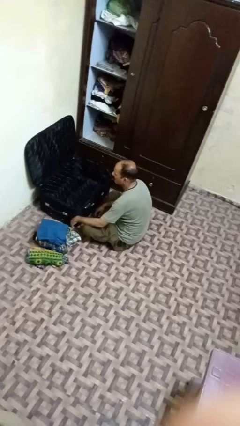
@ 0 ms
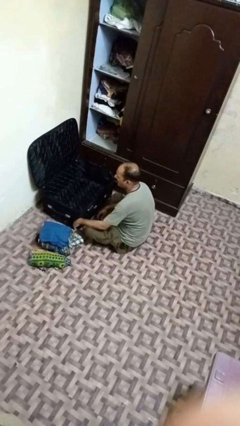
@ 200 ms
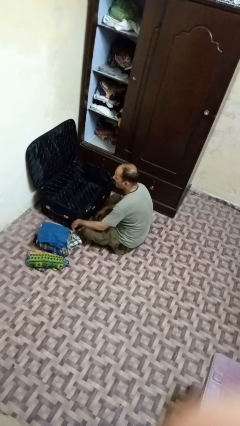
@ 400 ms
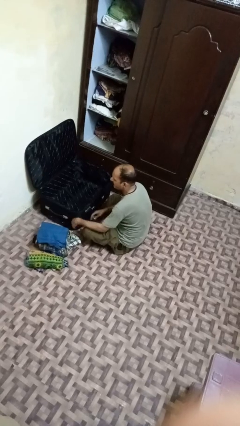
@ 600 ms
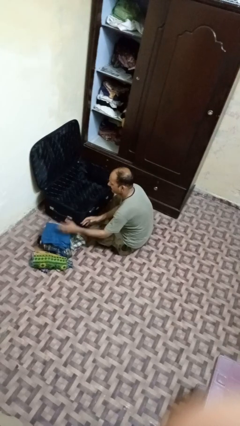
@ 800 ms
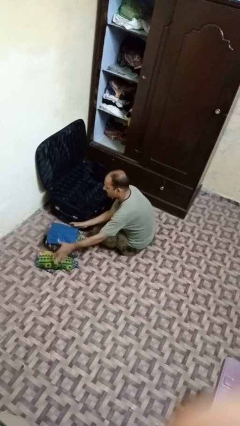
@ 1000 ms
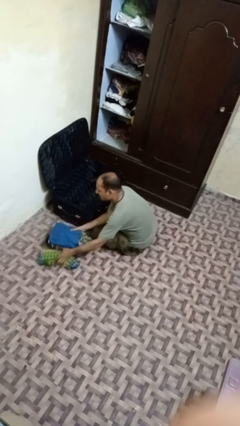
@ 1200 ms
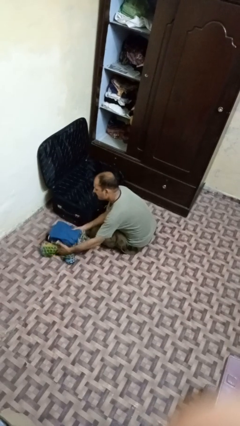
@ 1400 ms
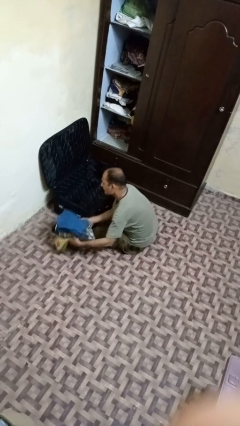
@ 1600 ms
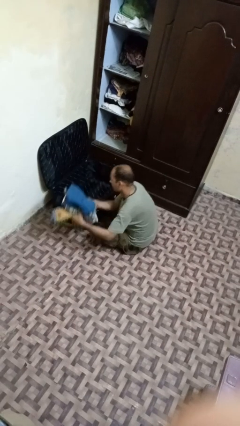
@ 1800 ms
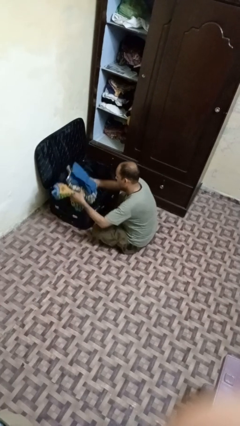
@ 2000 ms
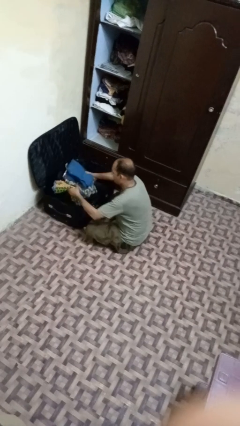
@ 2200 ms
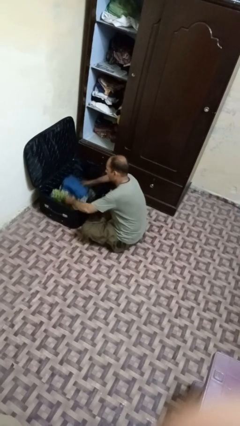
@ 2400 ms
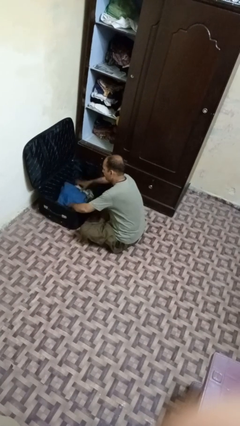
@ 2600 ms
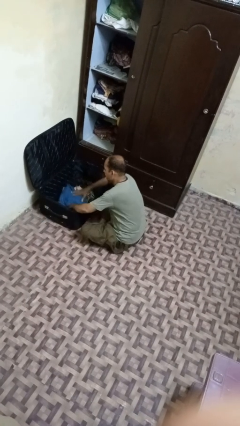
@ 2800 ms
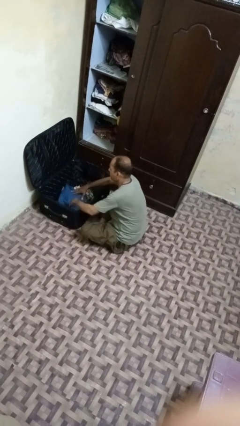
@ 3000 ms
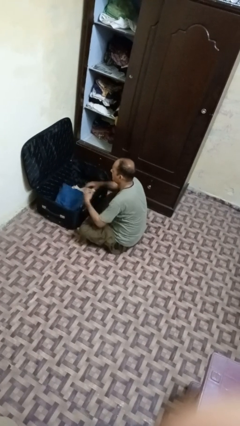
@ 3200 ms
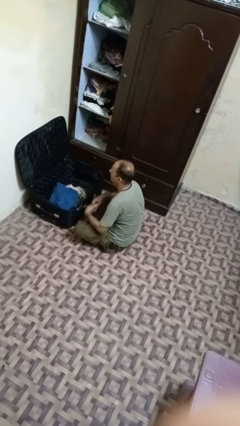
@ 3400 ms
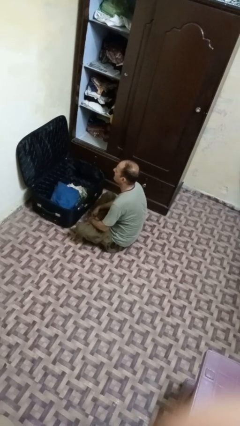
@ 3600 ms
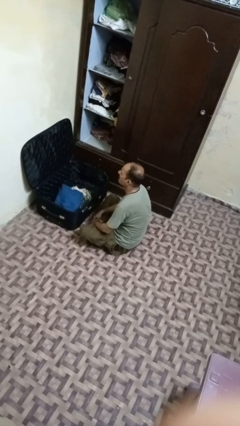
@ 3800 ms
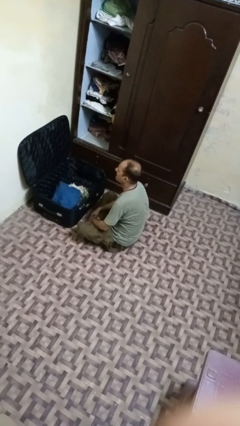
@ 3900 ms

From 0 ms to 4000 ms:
person loads clothes into suitcase

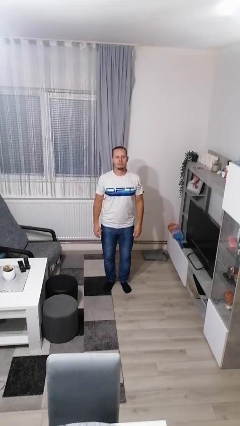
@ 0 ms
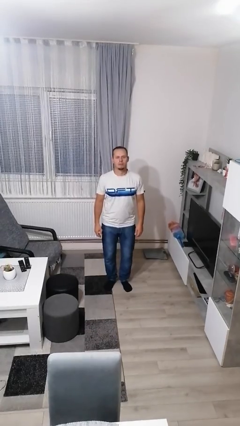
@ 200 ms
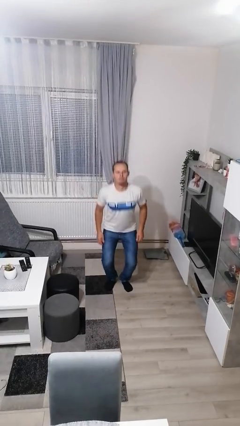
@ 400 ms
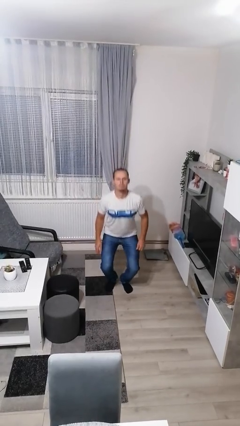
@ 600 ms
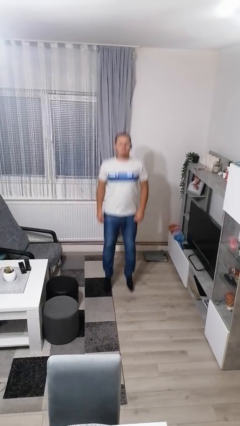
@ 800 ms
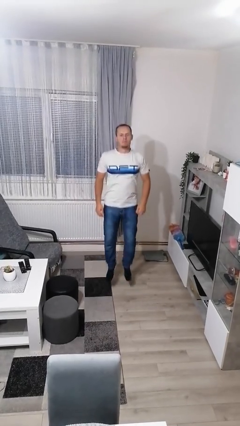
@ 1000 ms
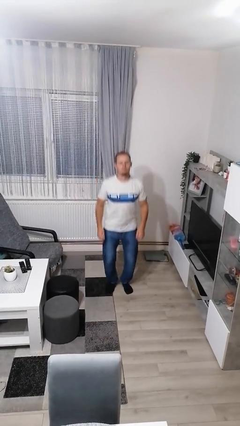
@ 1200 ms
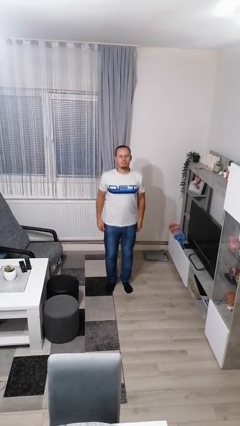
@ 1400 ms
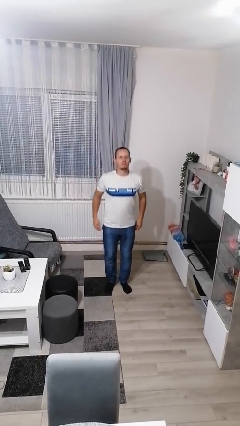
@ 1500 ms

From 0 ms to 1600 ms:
person jumps

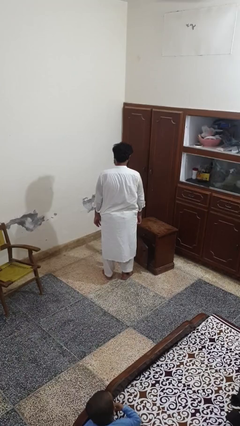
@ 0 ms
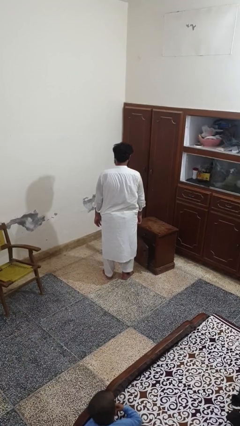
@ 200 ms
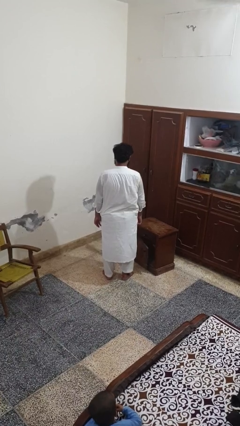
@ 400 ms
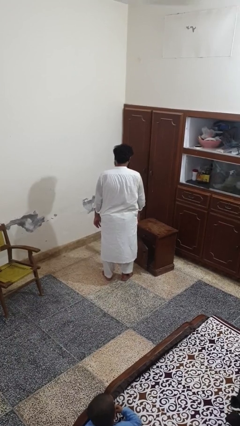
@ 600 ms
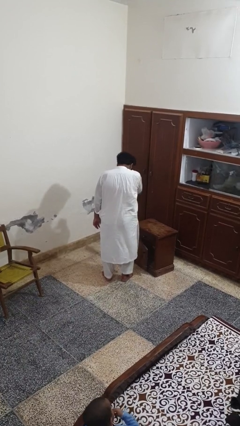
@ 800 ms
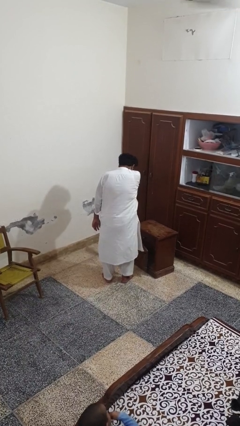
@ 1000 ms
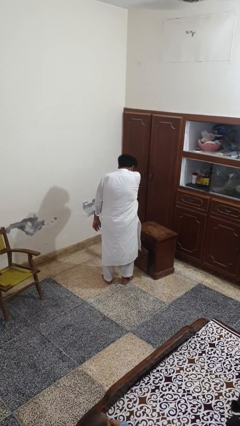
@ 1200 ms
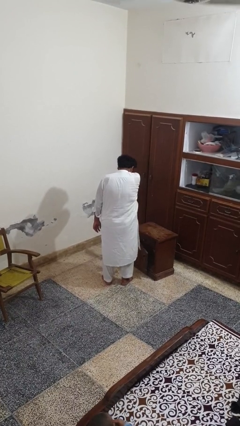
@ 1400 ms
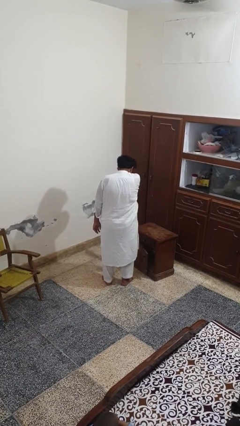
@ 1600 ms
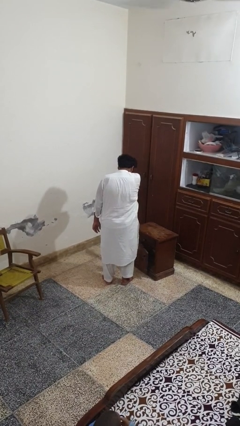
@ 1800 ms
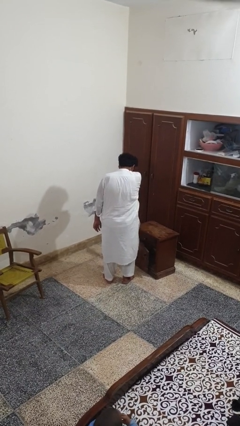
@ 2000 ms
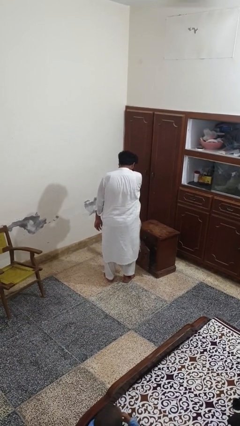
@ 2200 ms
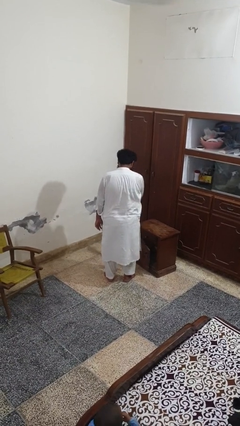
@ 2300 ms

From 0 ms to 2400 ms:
person sneezes into arm

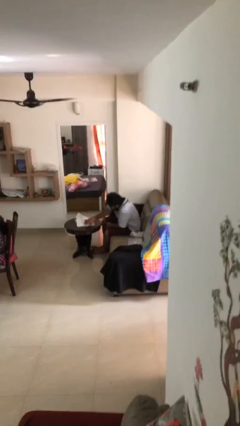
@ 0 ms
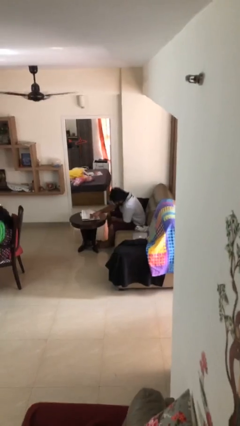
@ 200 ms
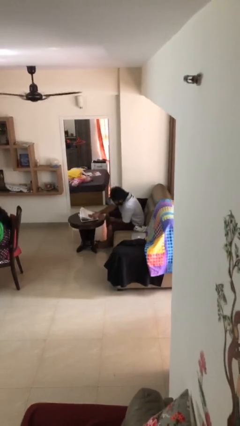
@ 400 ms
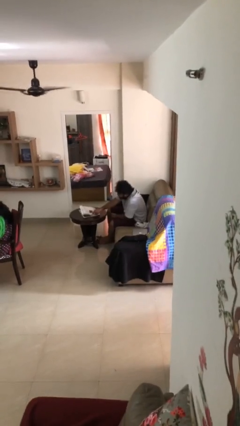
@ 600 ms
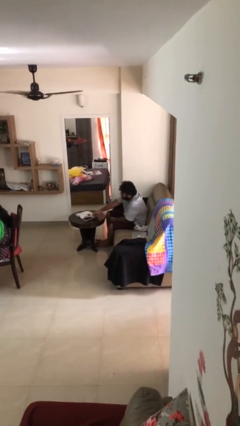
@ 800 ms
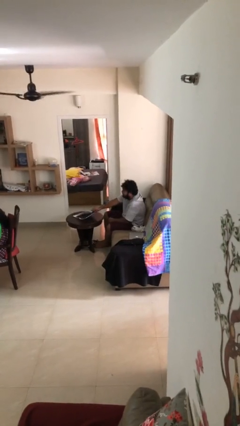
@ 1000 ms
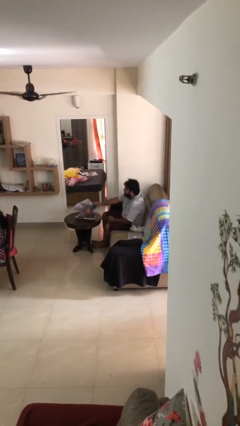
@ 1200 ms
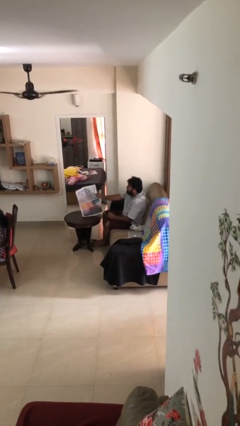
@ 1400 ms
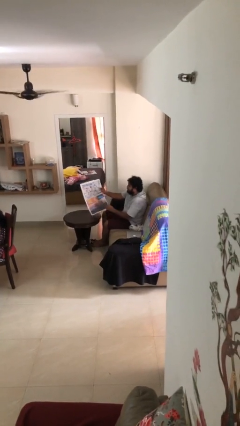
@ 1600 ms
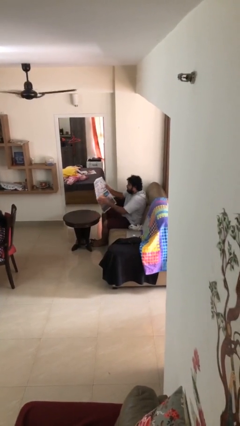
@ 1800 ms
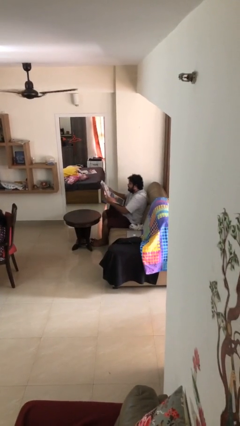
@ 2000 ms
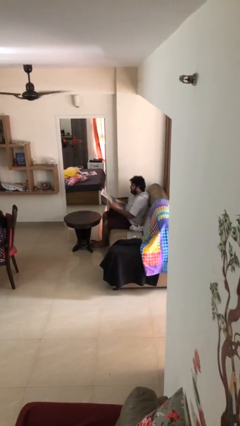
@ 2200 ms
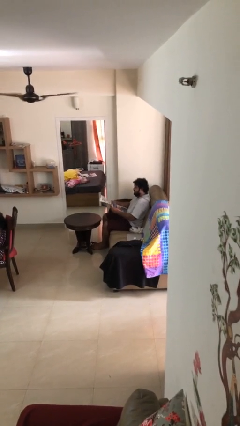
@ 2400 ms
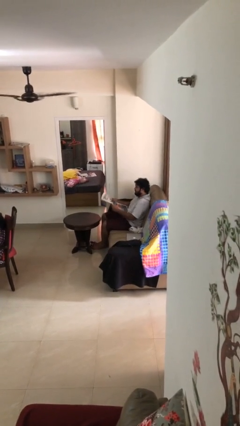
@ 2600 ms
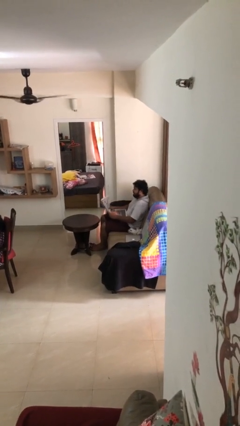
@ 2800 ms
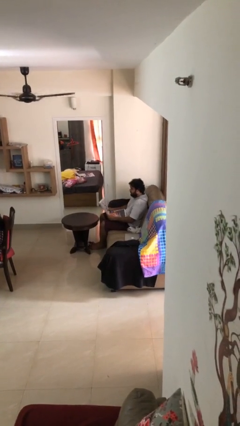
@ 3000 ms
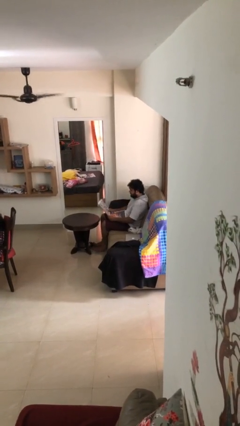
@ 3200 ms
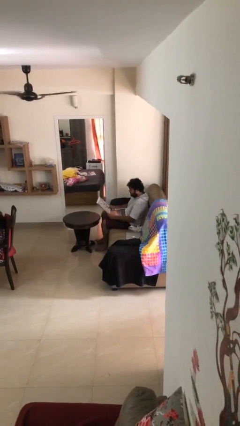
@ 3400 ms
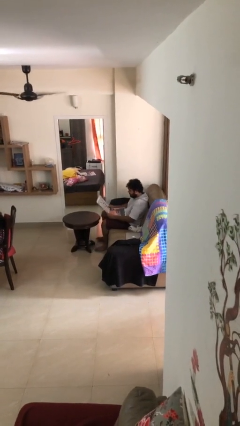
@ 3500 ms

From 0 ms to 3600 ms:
person picks up object from table

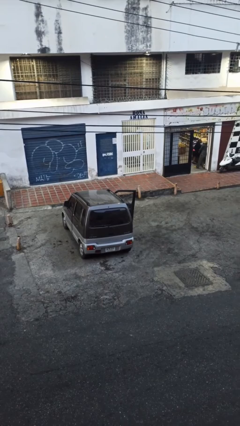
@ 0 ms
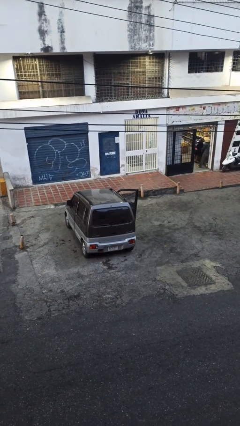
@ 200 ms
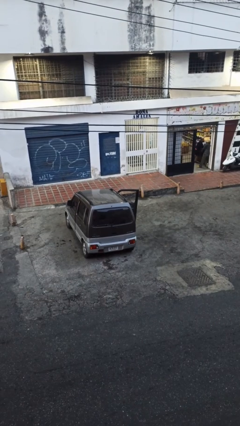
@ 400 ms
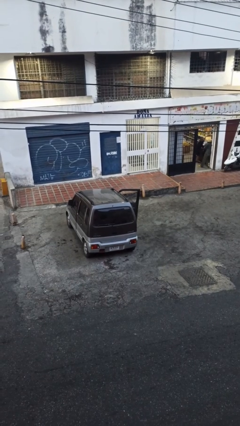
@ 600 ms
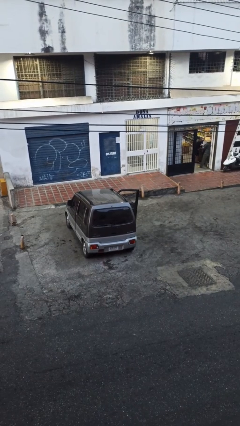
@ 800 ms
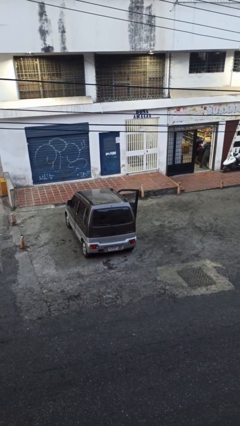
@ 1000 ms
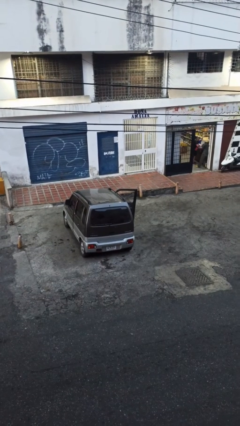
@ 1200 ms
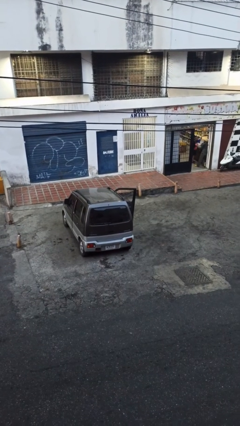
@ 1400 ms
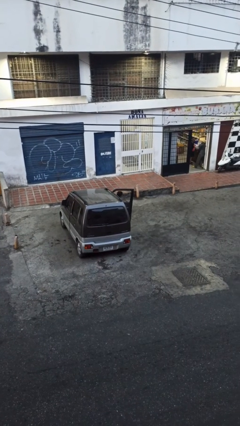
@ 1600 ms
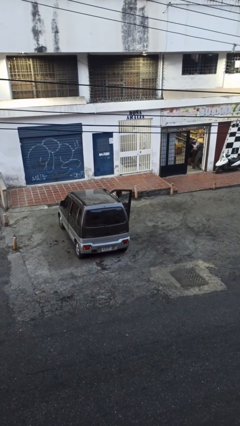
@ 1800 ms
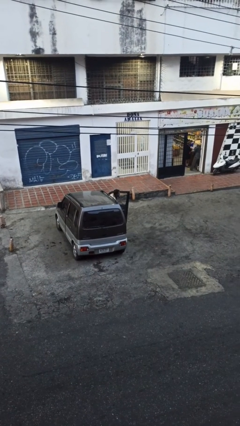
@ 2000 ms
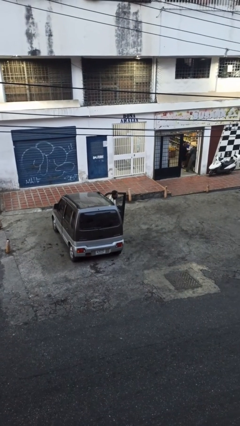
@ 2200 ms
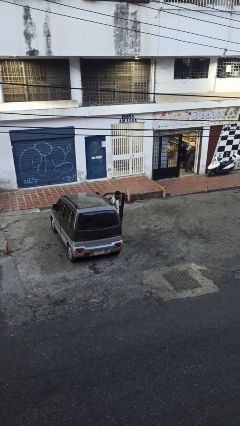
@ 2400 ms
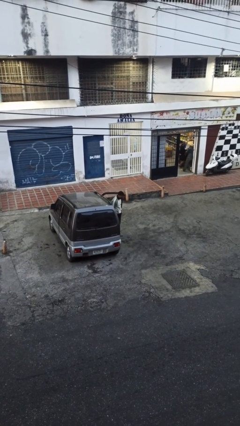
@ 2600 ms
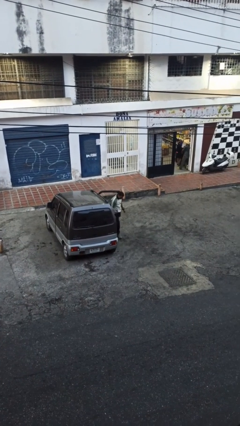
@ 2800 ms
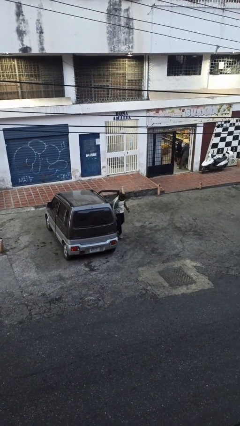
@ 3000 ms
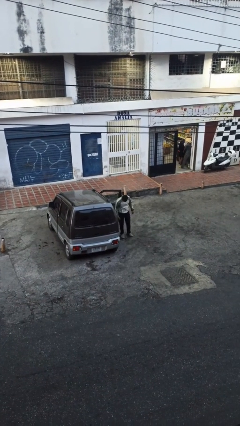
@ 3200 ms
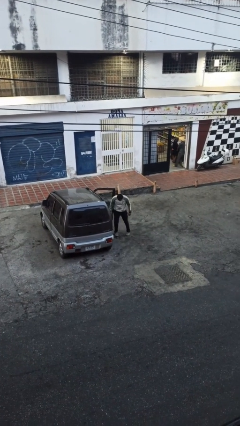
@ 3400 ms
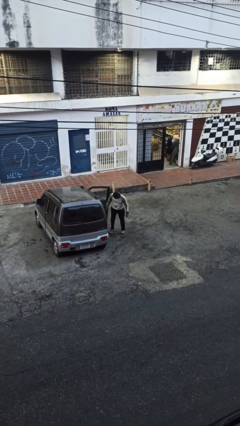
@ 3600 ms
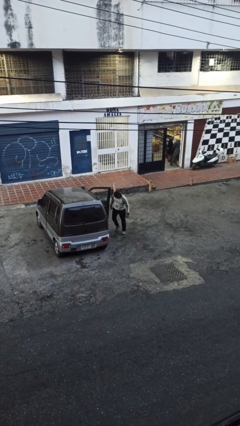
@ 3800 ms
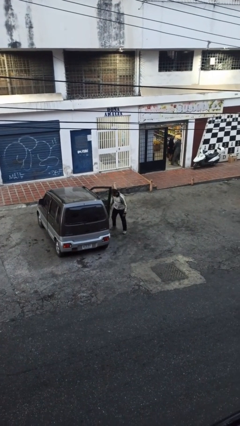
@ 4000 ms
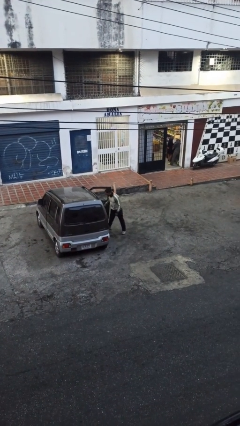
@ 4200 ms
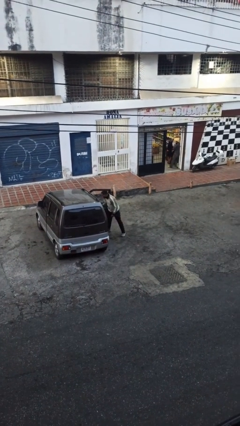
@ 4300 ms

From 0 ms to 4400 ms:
person exits car

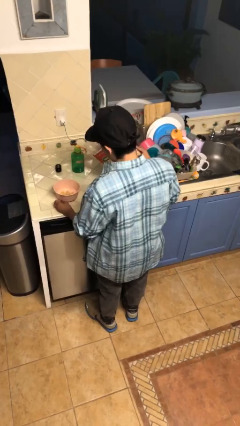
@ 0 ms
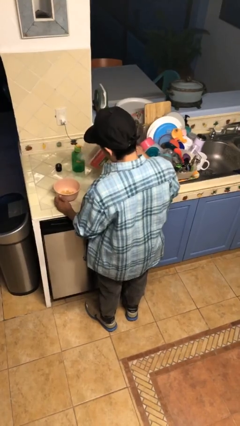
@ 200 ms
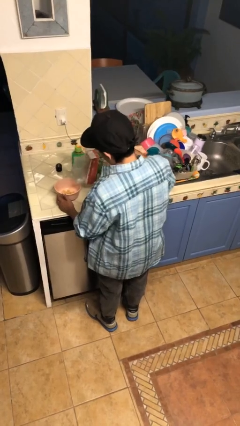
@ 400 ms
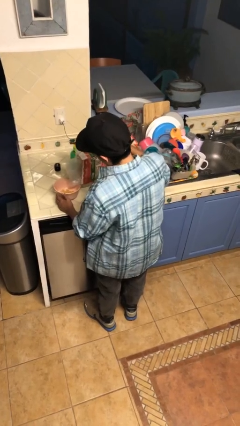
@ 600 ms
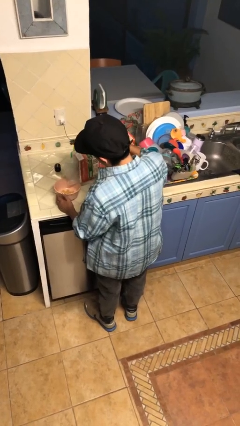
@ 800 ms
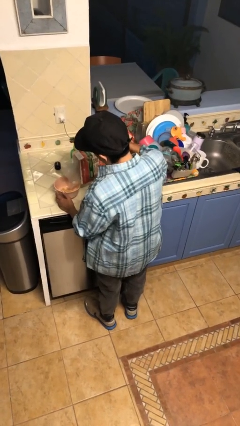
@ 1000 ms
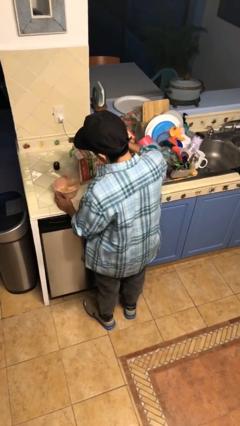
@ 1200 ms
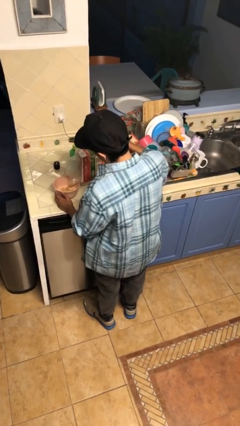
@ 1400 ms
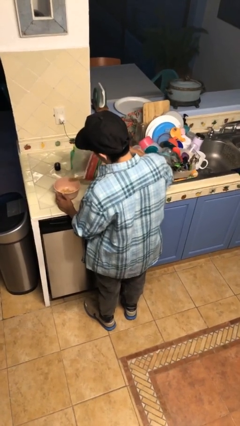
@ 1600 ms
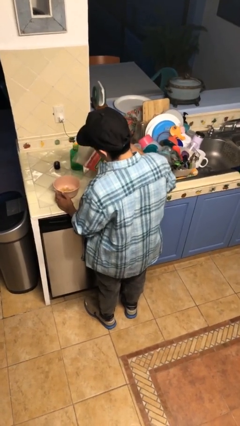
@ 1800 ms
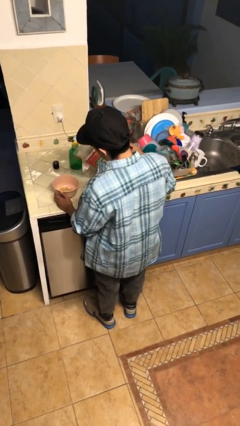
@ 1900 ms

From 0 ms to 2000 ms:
person pours into bowl
